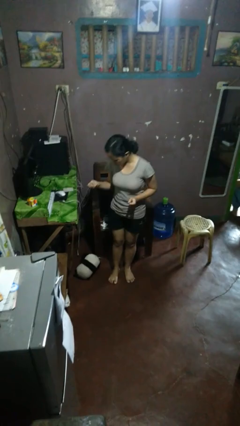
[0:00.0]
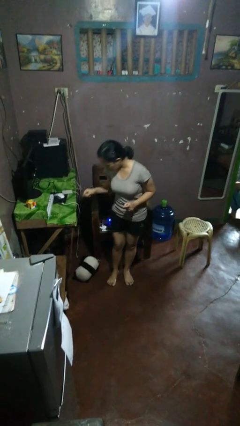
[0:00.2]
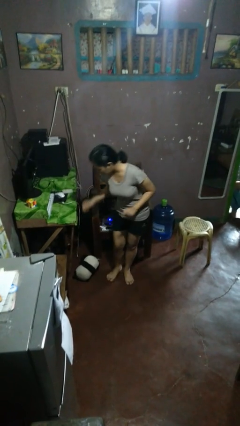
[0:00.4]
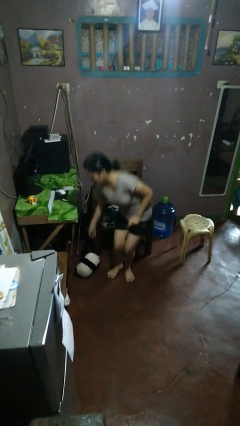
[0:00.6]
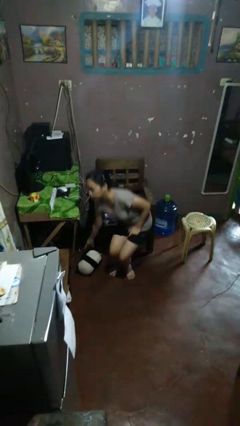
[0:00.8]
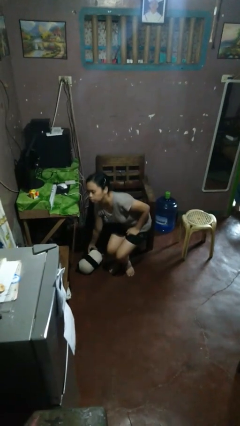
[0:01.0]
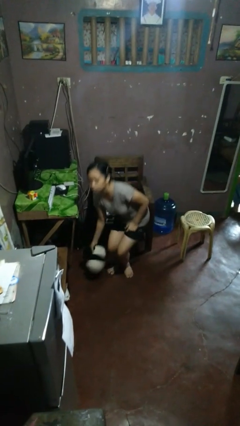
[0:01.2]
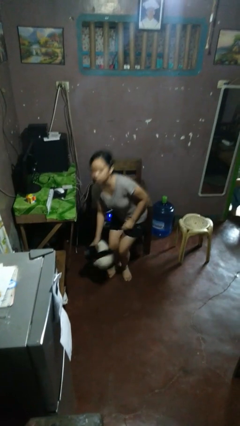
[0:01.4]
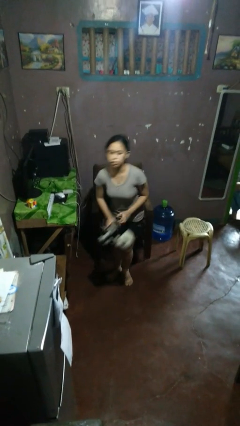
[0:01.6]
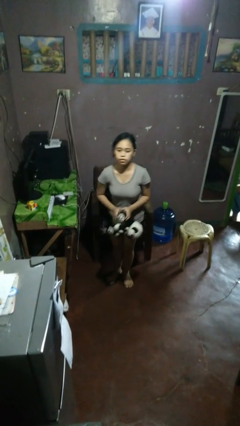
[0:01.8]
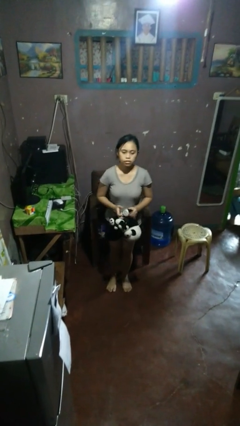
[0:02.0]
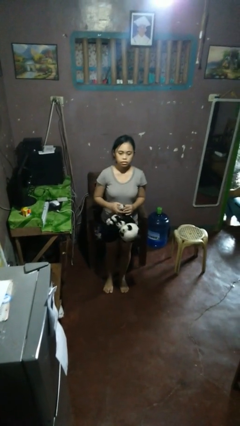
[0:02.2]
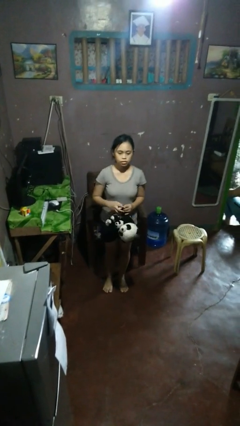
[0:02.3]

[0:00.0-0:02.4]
person picks up object from floor

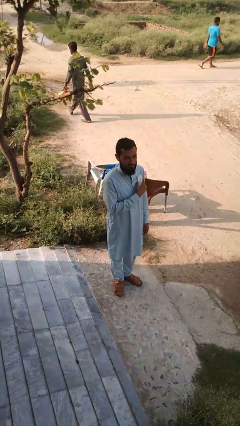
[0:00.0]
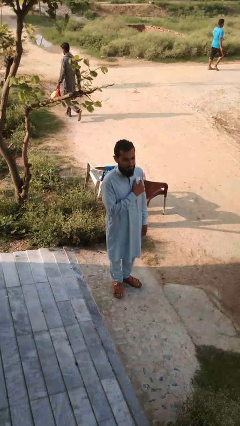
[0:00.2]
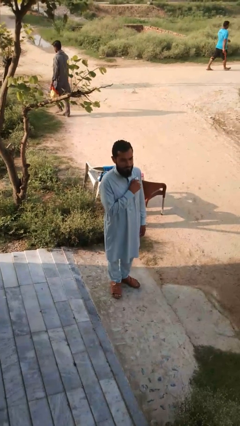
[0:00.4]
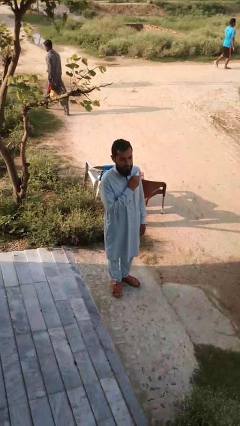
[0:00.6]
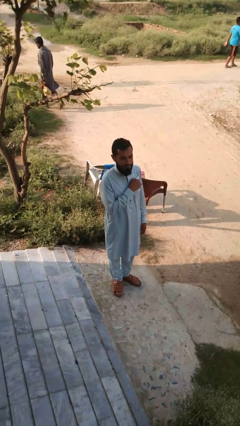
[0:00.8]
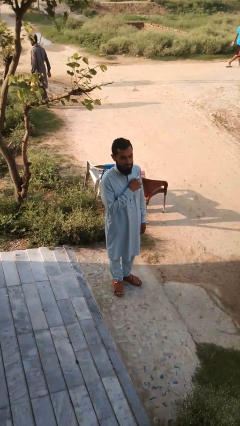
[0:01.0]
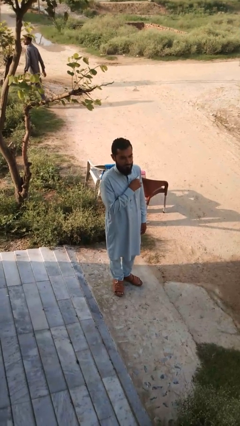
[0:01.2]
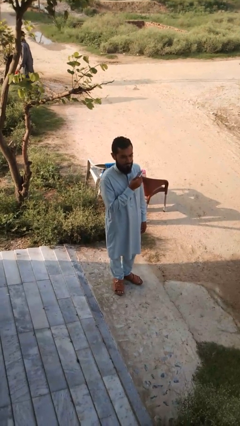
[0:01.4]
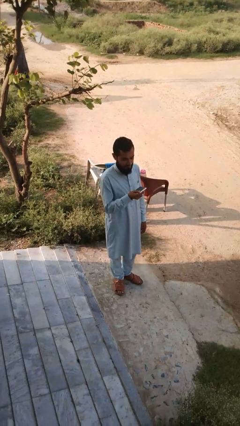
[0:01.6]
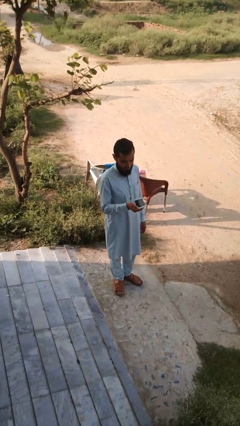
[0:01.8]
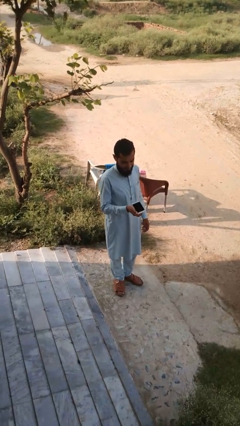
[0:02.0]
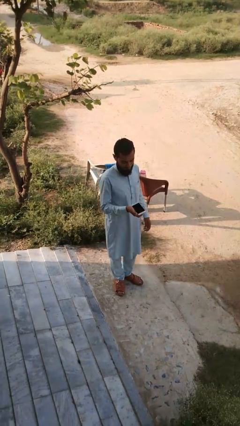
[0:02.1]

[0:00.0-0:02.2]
person takes phone from pocket

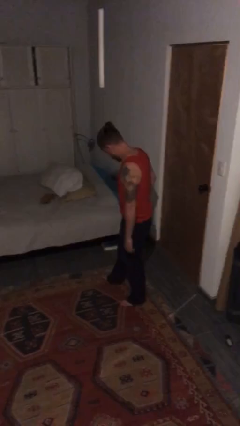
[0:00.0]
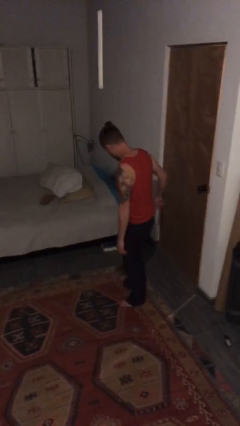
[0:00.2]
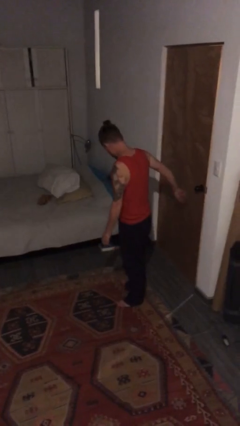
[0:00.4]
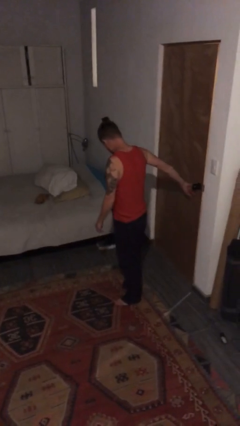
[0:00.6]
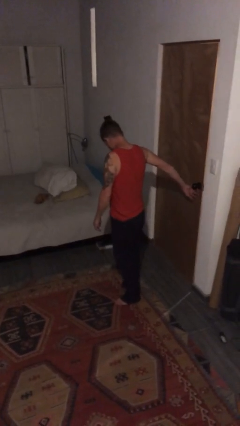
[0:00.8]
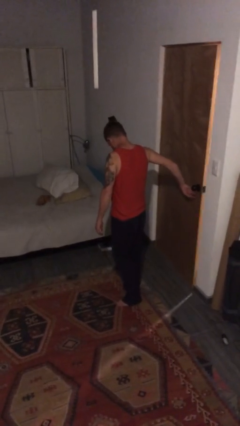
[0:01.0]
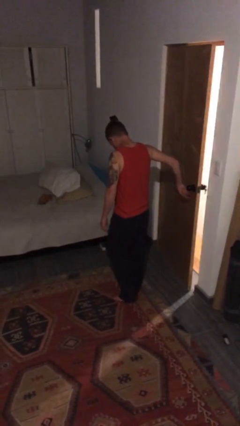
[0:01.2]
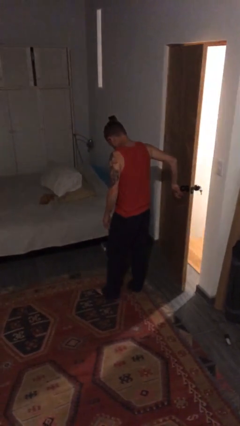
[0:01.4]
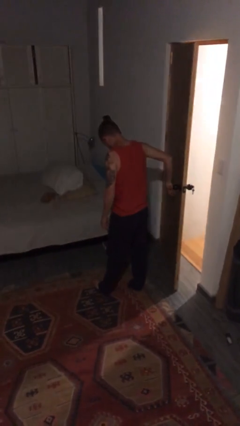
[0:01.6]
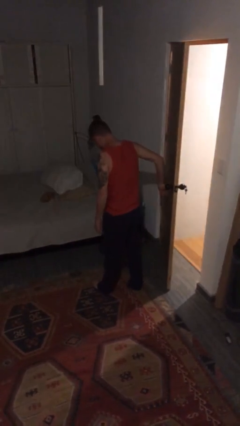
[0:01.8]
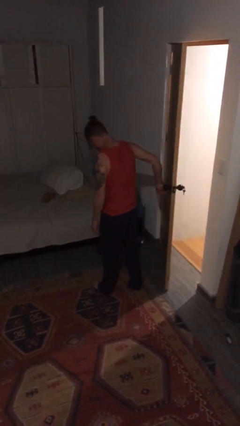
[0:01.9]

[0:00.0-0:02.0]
person opens facility door

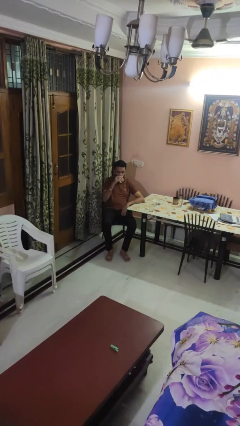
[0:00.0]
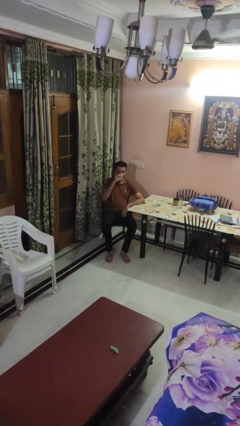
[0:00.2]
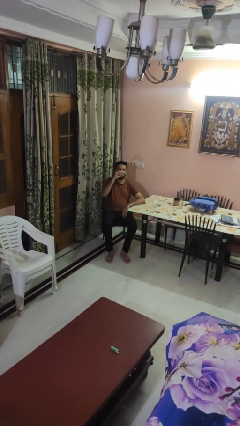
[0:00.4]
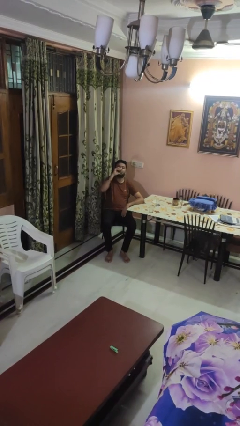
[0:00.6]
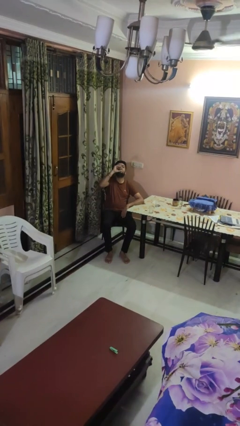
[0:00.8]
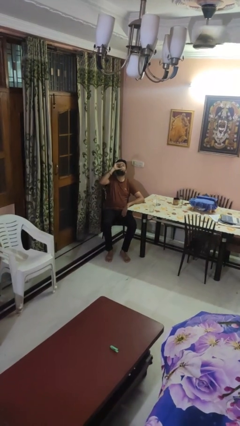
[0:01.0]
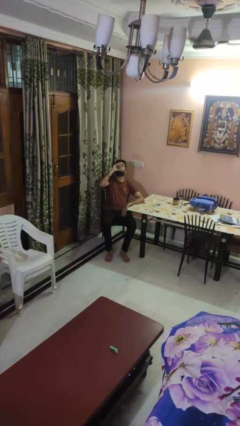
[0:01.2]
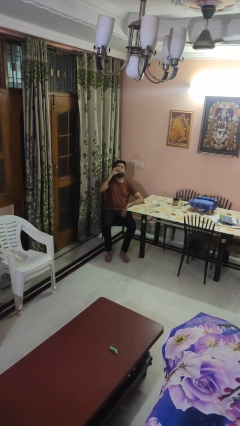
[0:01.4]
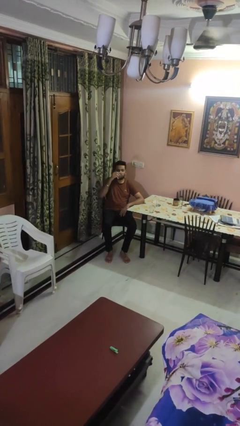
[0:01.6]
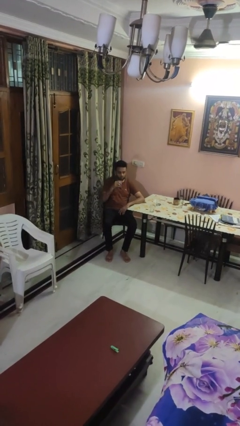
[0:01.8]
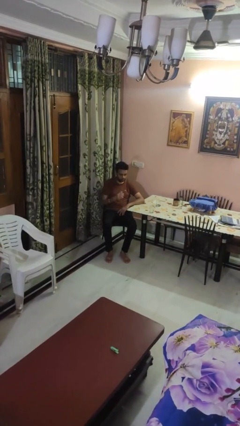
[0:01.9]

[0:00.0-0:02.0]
person drinks from shotglass

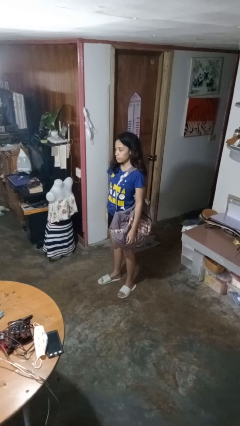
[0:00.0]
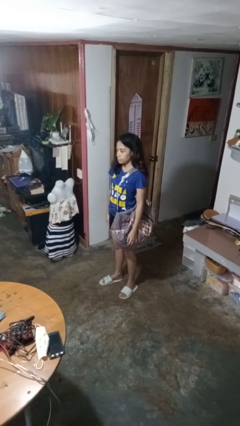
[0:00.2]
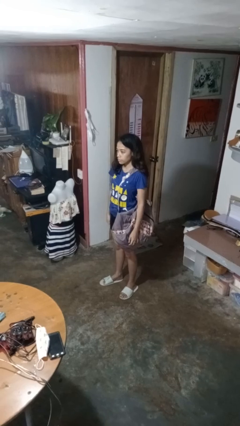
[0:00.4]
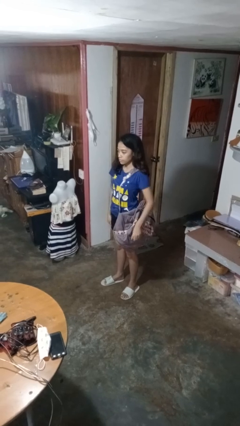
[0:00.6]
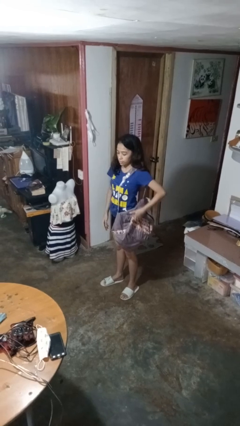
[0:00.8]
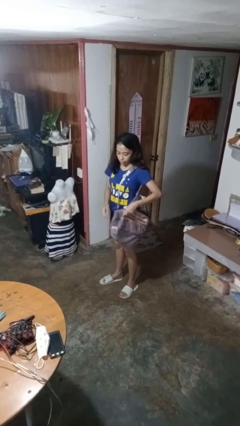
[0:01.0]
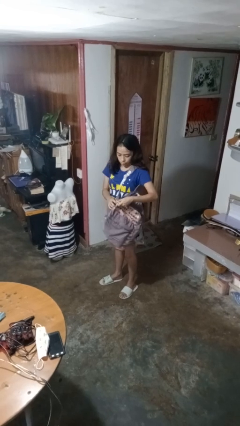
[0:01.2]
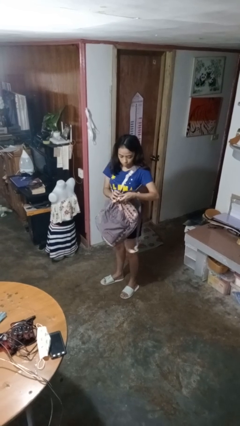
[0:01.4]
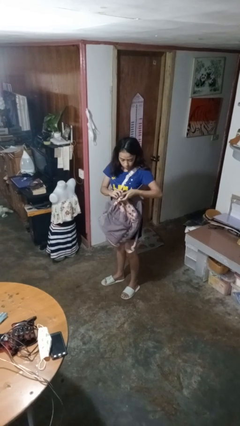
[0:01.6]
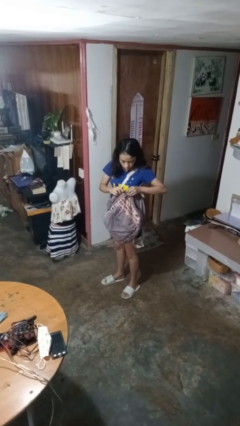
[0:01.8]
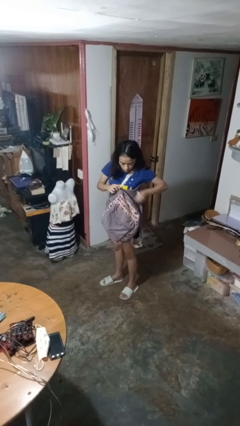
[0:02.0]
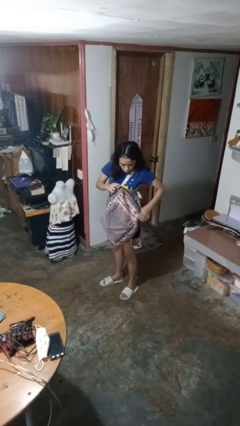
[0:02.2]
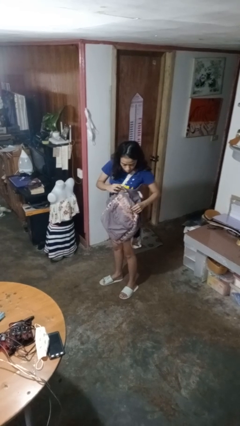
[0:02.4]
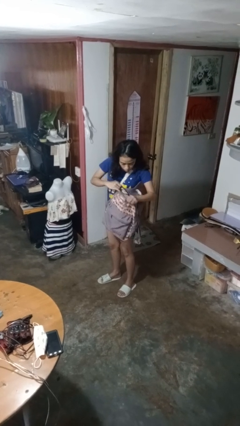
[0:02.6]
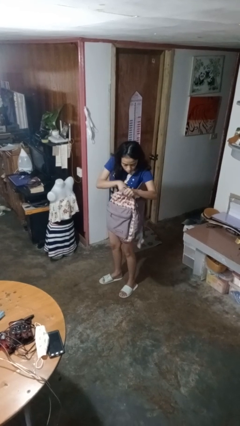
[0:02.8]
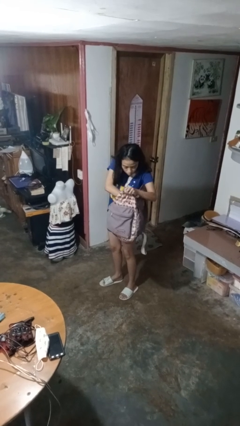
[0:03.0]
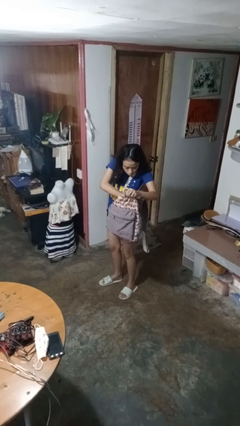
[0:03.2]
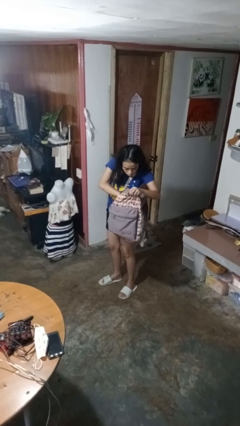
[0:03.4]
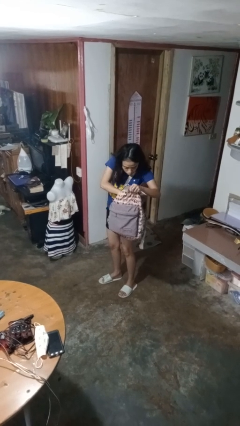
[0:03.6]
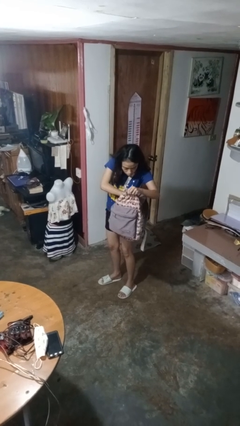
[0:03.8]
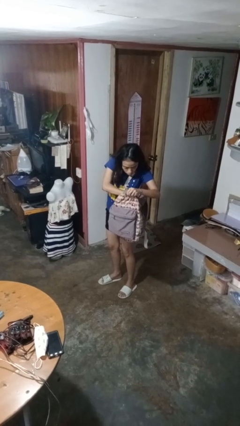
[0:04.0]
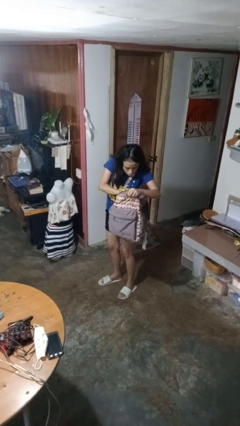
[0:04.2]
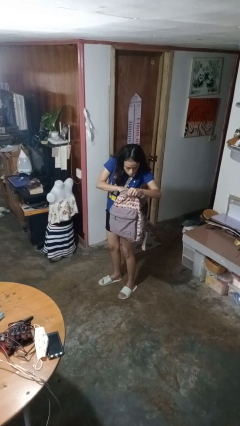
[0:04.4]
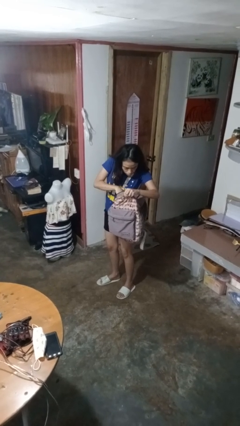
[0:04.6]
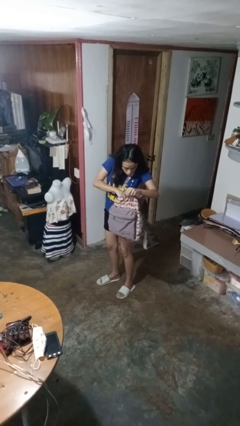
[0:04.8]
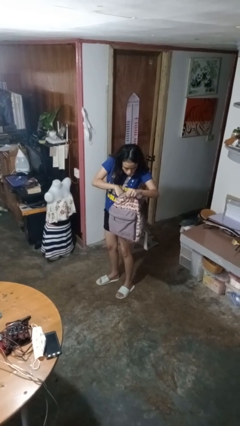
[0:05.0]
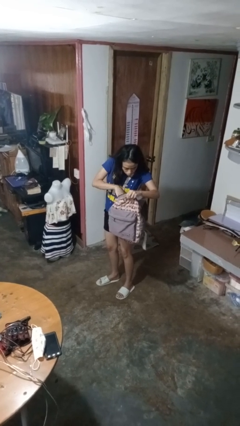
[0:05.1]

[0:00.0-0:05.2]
person searches in backpack

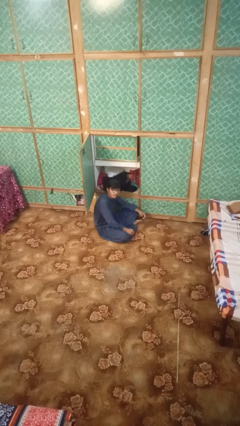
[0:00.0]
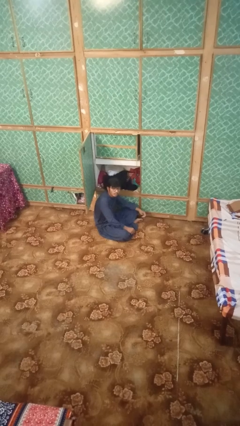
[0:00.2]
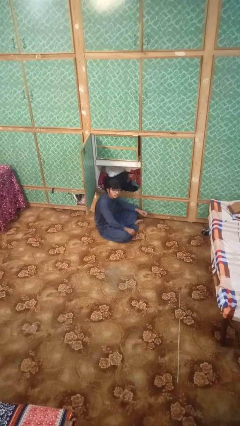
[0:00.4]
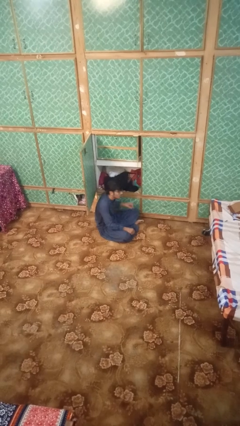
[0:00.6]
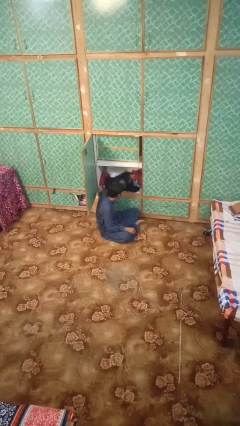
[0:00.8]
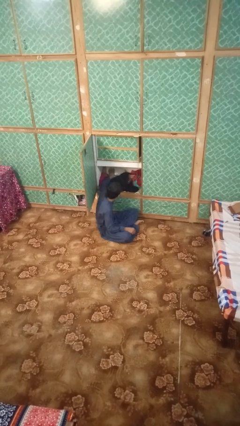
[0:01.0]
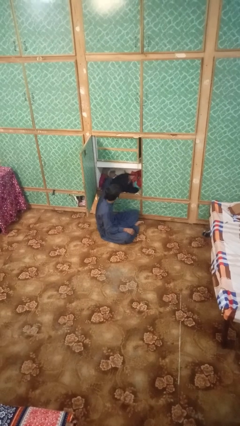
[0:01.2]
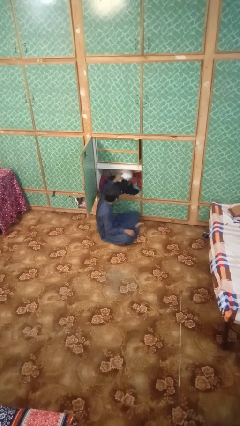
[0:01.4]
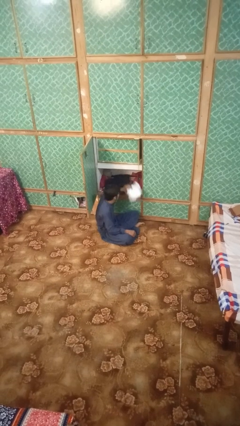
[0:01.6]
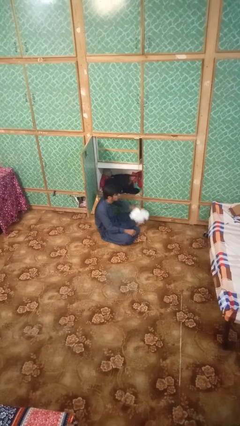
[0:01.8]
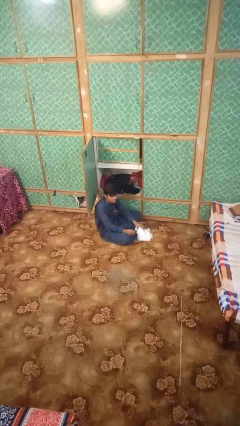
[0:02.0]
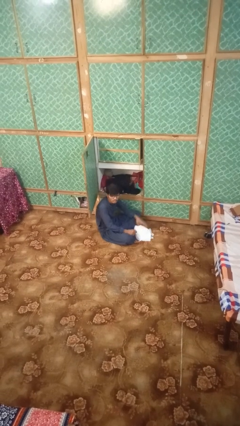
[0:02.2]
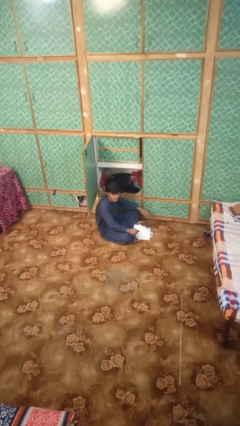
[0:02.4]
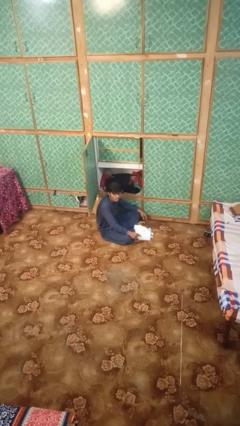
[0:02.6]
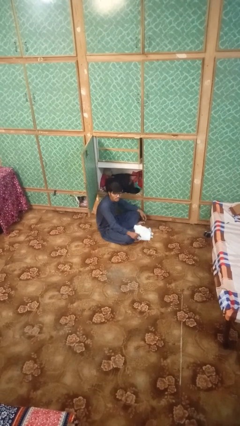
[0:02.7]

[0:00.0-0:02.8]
person takes clothes from dresser

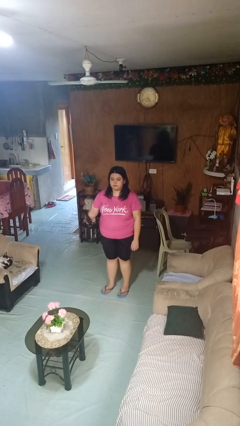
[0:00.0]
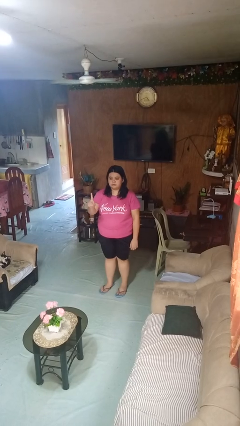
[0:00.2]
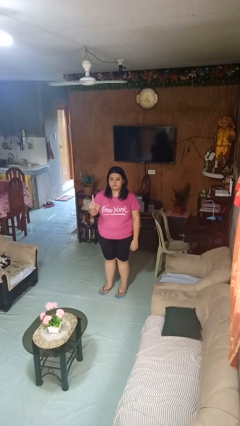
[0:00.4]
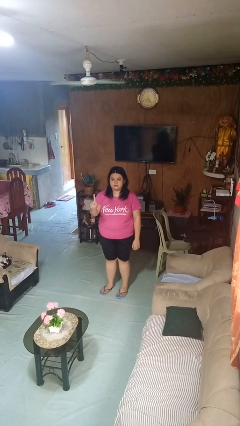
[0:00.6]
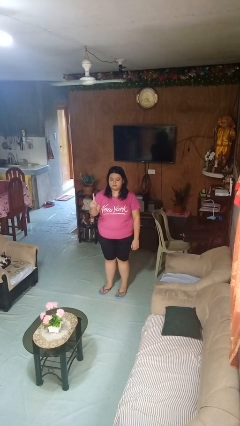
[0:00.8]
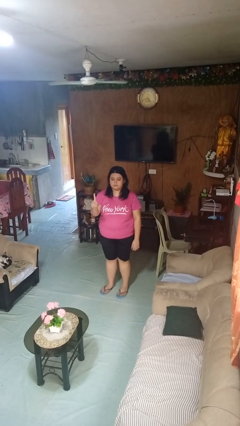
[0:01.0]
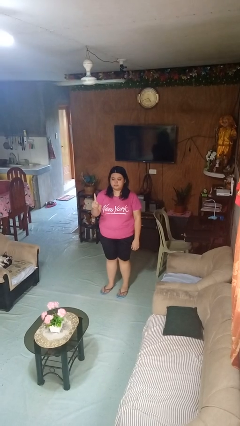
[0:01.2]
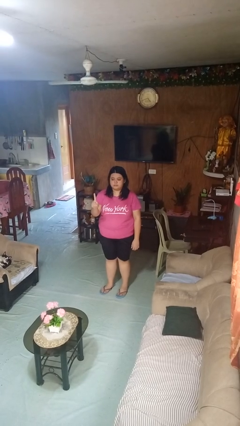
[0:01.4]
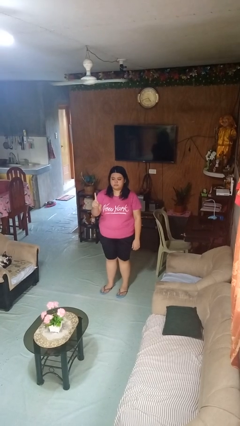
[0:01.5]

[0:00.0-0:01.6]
person gestures number one
